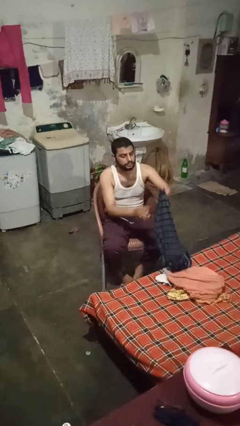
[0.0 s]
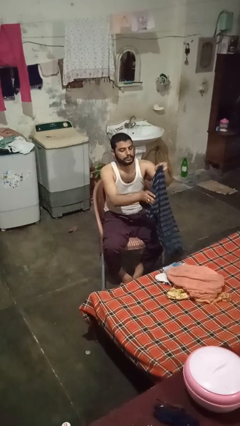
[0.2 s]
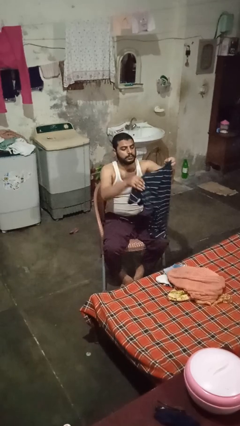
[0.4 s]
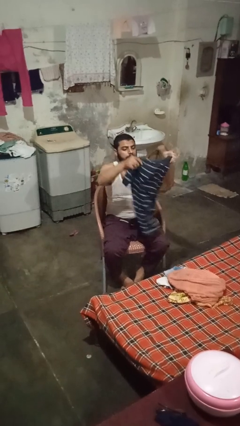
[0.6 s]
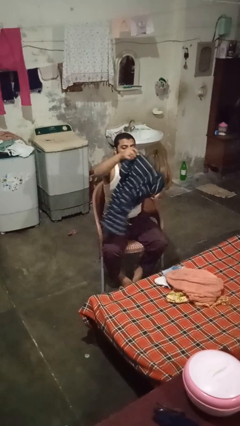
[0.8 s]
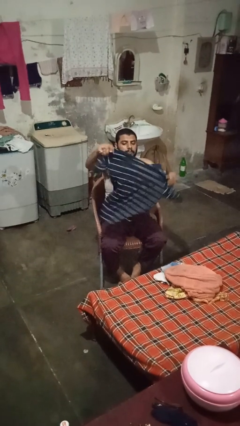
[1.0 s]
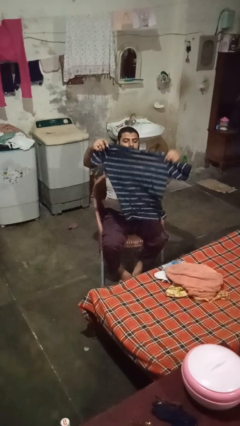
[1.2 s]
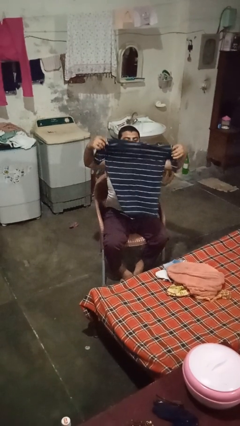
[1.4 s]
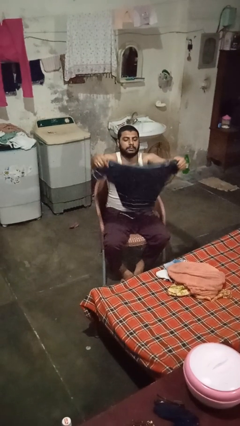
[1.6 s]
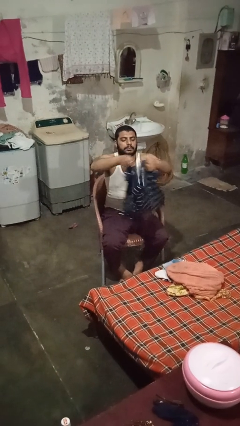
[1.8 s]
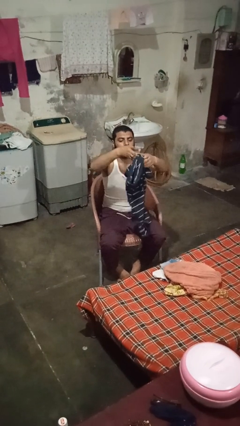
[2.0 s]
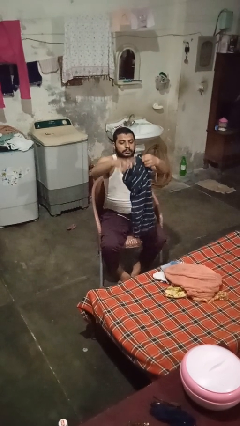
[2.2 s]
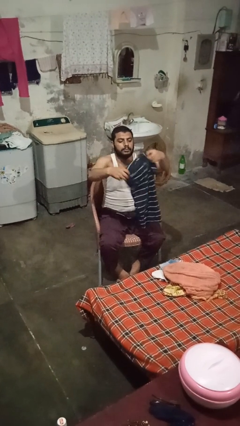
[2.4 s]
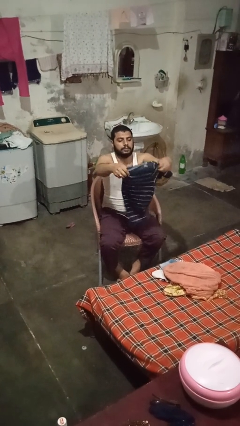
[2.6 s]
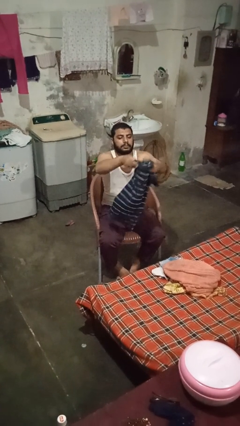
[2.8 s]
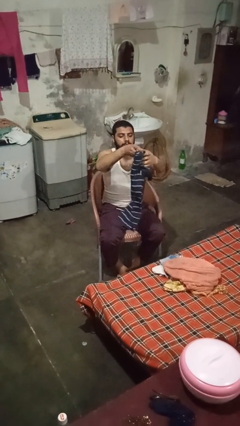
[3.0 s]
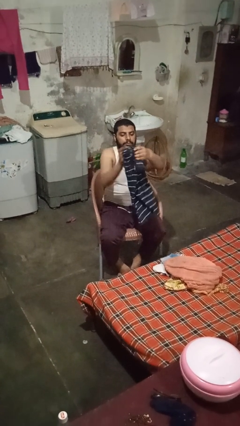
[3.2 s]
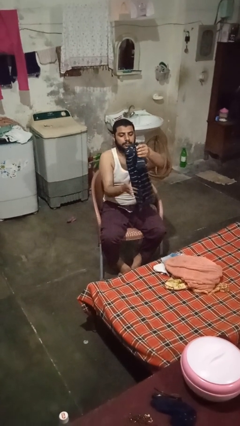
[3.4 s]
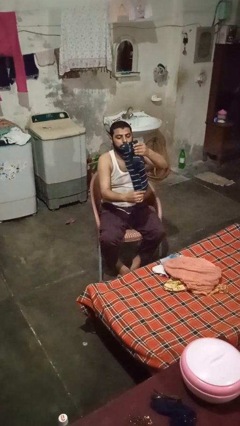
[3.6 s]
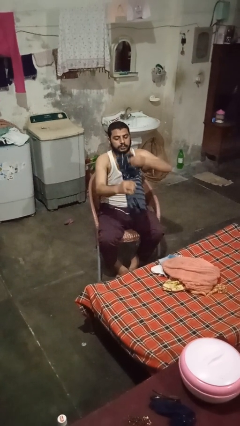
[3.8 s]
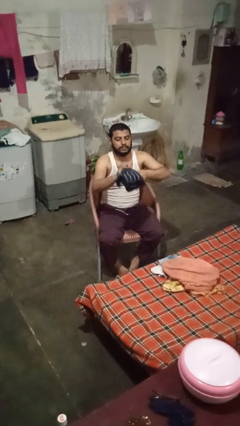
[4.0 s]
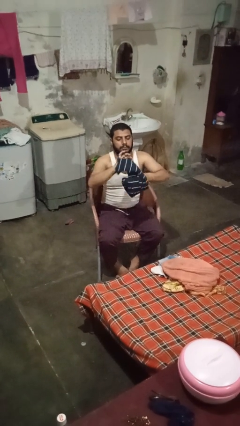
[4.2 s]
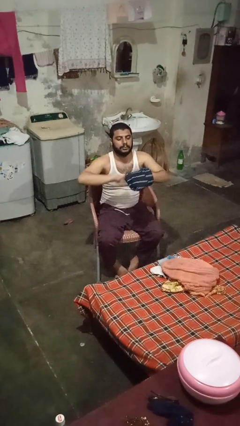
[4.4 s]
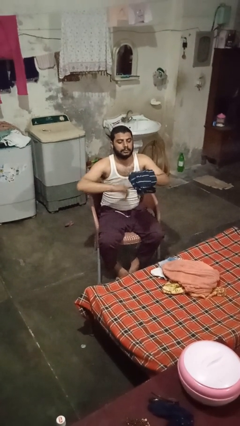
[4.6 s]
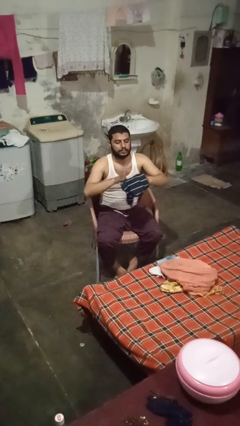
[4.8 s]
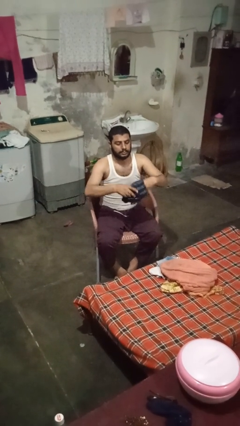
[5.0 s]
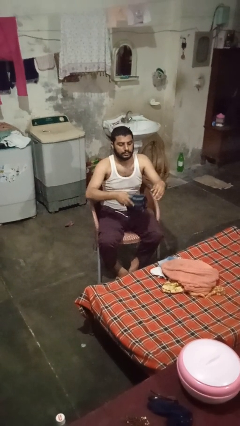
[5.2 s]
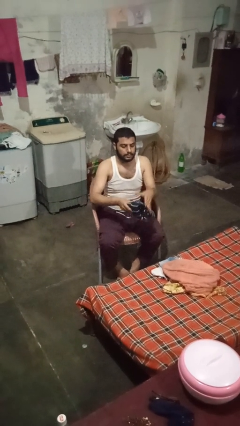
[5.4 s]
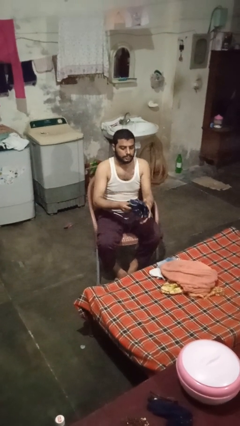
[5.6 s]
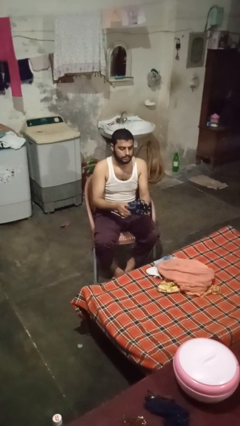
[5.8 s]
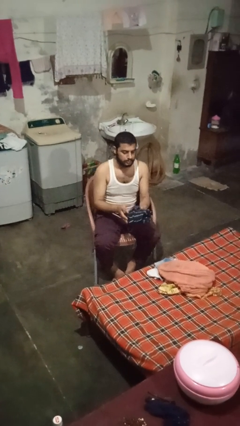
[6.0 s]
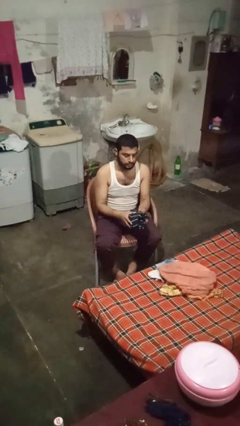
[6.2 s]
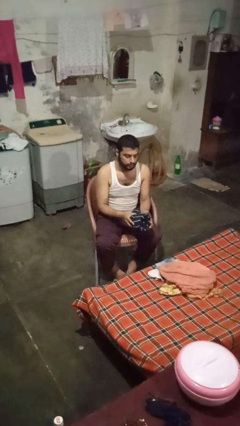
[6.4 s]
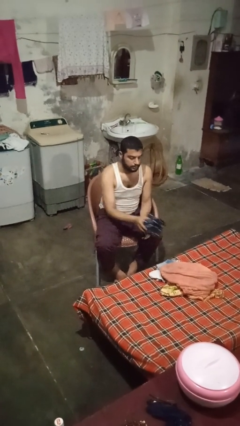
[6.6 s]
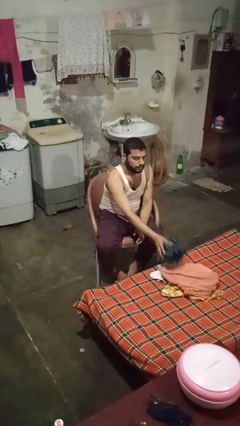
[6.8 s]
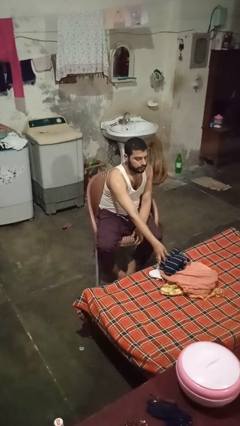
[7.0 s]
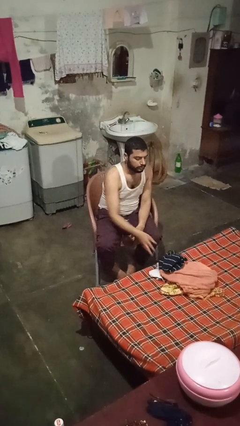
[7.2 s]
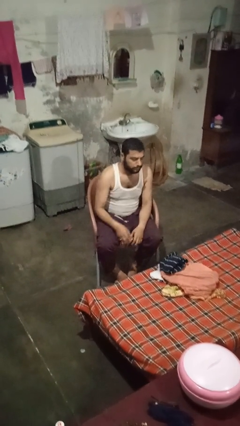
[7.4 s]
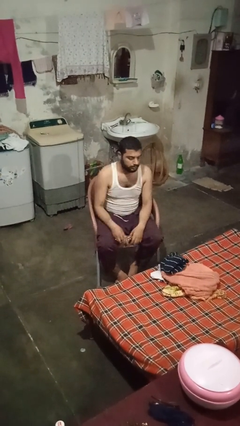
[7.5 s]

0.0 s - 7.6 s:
person folds shirt

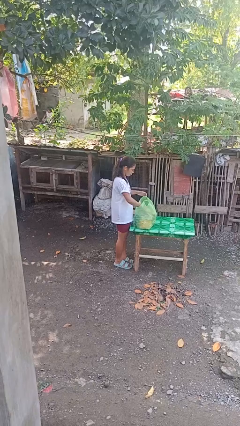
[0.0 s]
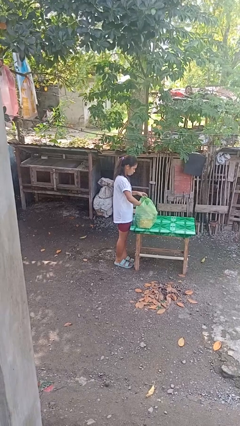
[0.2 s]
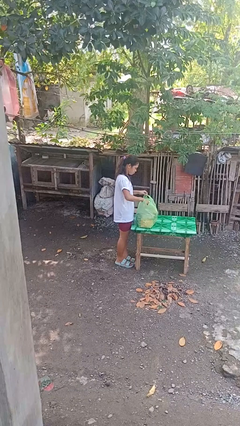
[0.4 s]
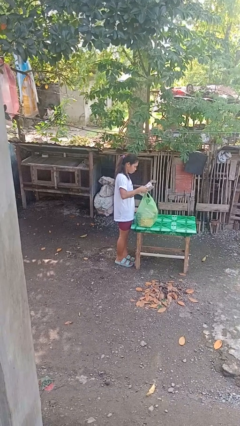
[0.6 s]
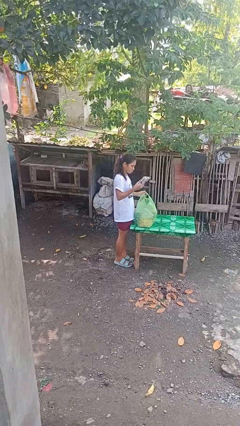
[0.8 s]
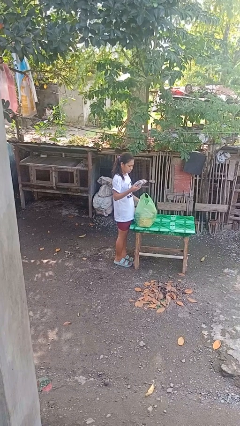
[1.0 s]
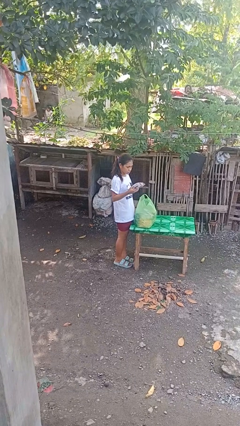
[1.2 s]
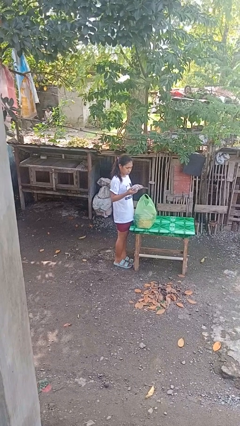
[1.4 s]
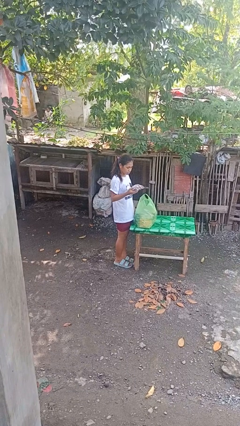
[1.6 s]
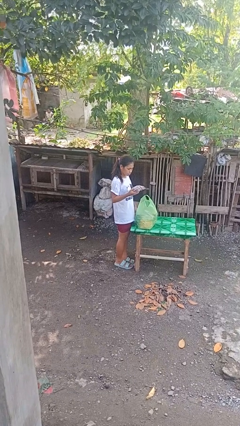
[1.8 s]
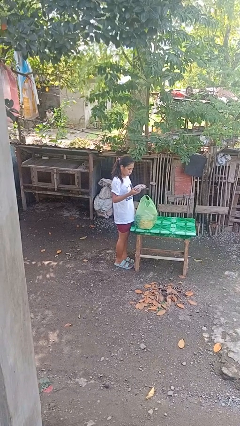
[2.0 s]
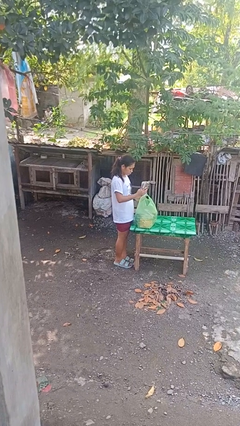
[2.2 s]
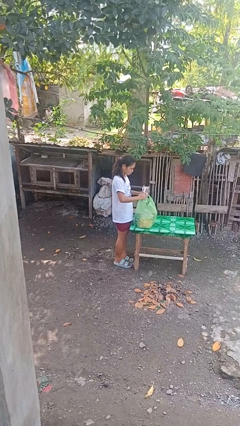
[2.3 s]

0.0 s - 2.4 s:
person takes object from bag

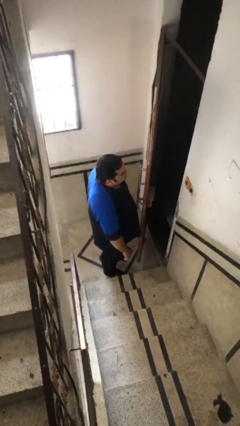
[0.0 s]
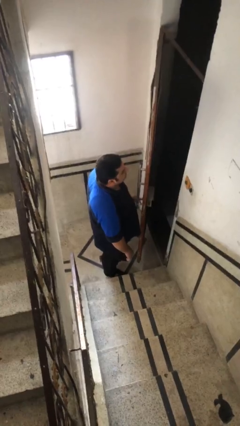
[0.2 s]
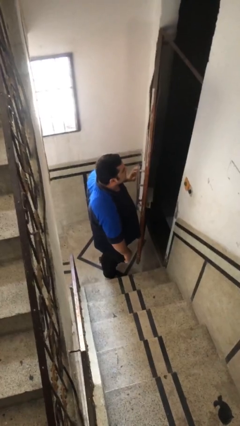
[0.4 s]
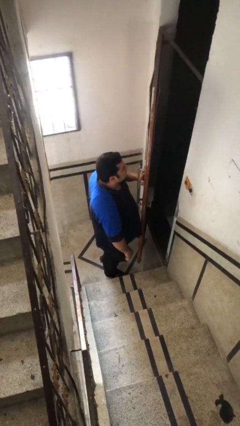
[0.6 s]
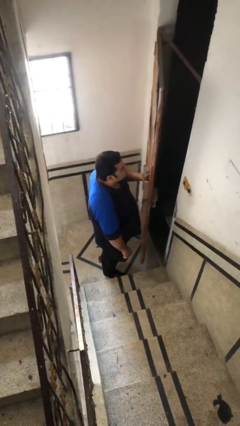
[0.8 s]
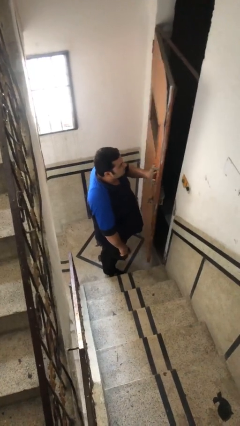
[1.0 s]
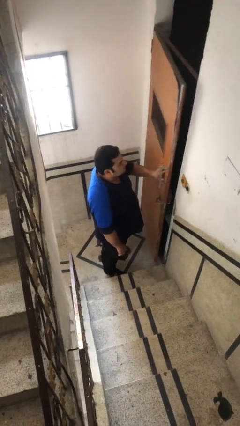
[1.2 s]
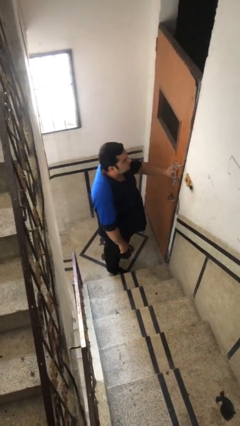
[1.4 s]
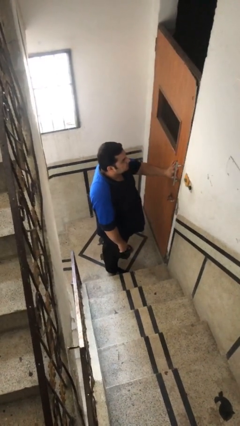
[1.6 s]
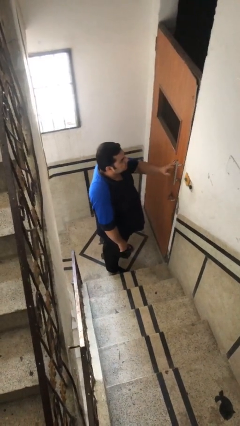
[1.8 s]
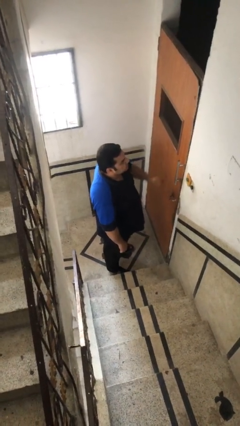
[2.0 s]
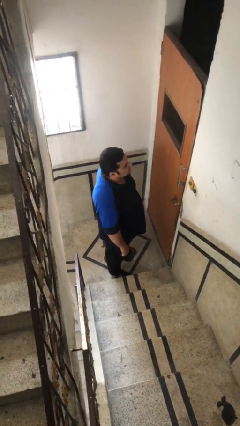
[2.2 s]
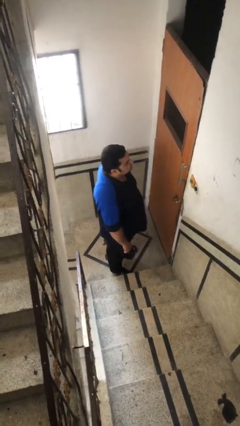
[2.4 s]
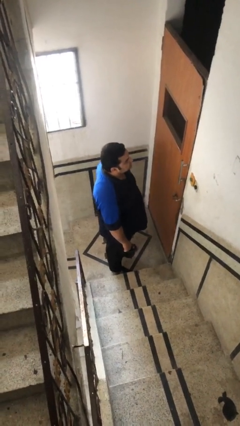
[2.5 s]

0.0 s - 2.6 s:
person closes facility door

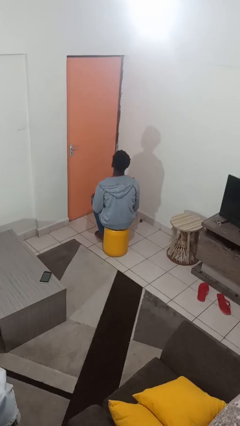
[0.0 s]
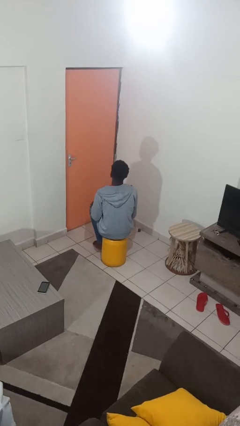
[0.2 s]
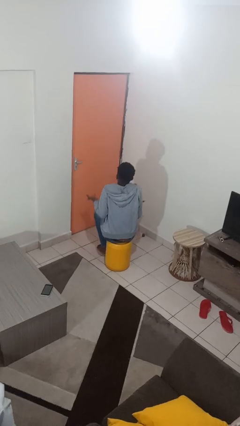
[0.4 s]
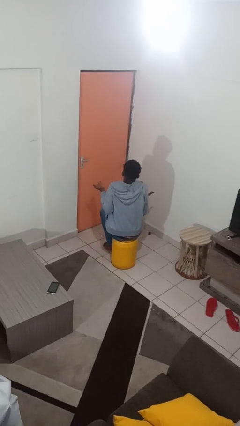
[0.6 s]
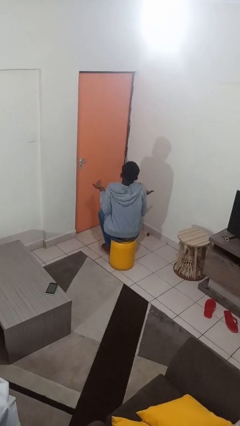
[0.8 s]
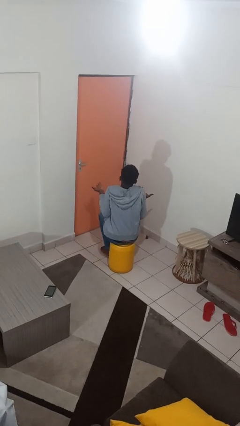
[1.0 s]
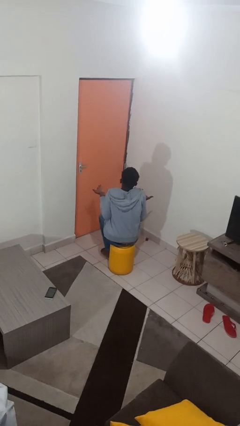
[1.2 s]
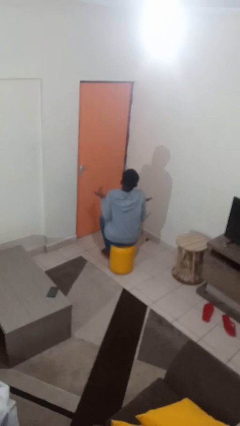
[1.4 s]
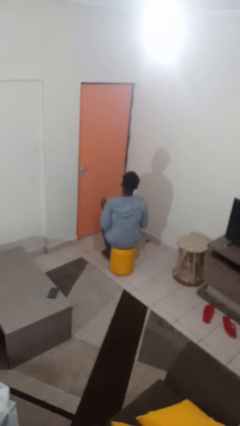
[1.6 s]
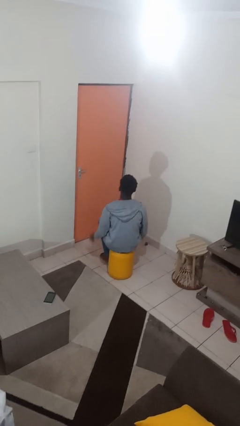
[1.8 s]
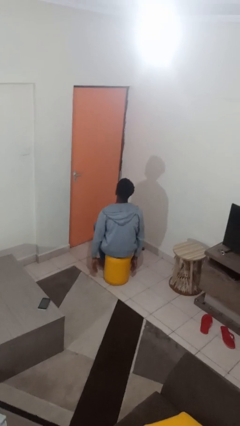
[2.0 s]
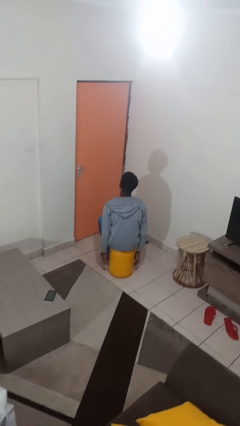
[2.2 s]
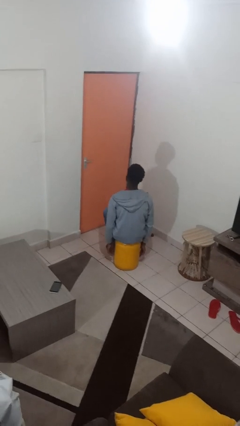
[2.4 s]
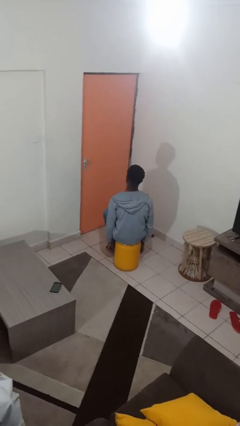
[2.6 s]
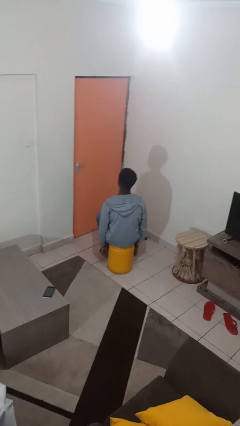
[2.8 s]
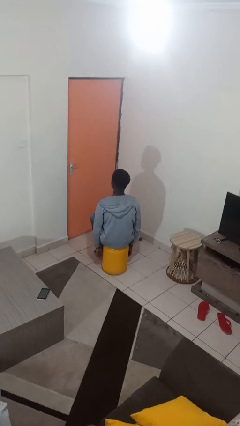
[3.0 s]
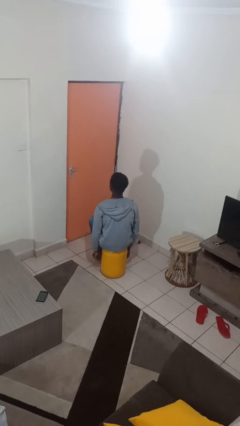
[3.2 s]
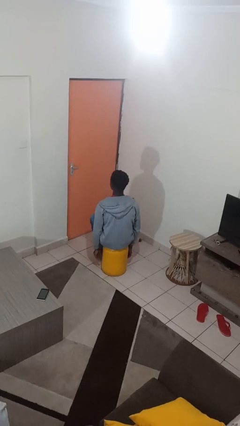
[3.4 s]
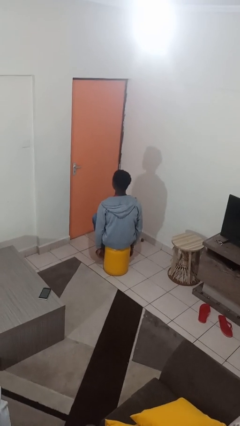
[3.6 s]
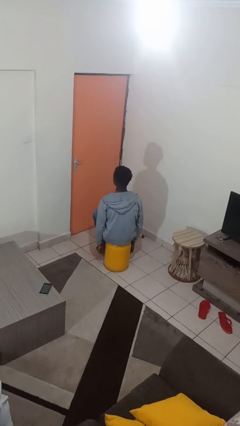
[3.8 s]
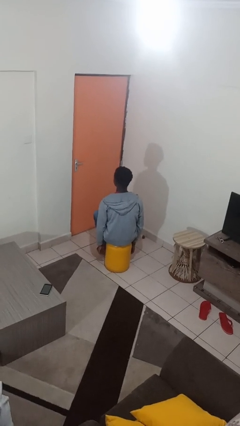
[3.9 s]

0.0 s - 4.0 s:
person shrugs

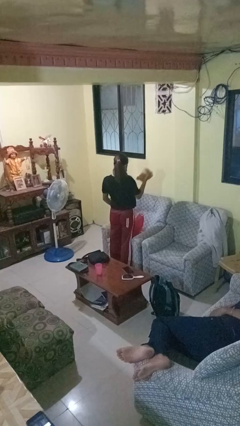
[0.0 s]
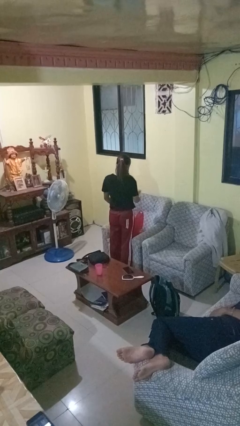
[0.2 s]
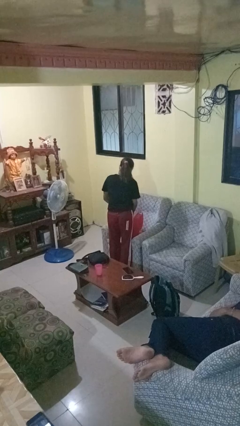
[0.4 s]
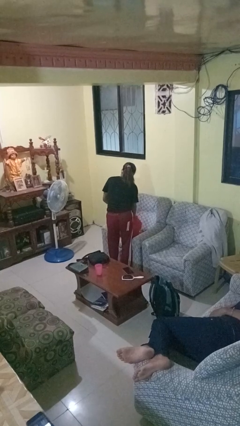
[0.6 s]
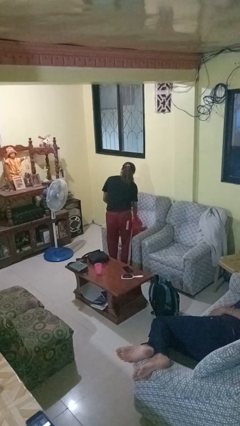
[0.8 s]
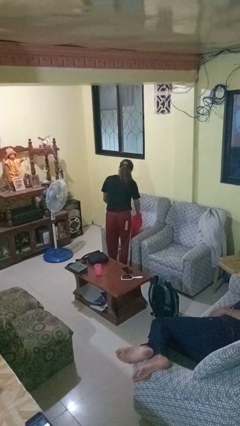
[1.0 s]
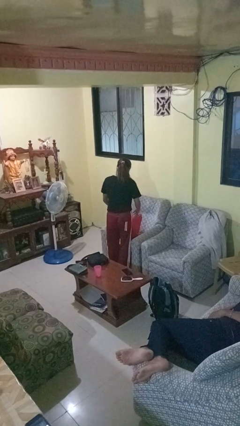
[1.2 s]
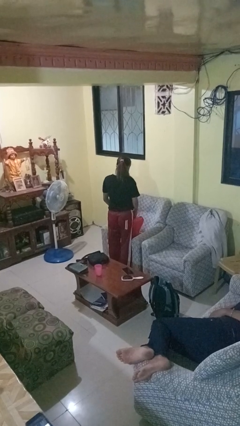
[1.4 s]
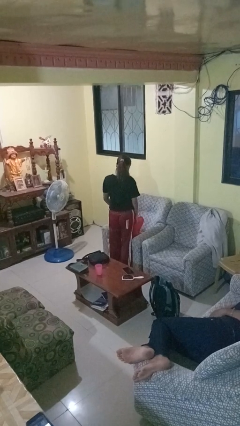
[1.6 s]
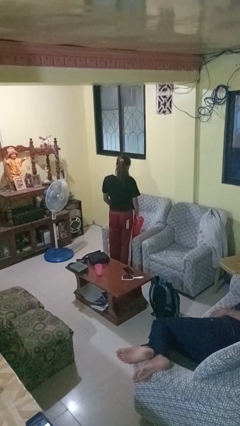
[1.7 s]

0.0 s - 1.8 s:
person puts object into bag
